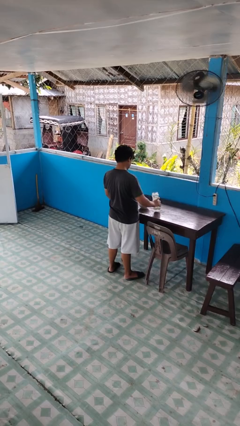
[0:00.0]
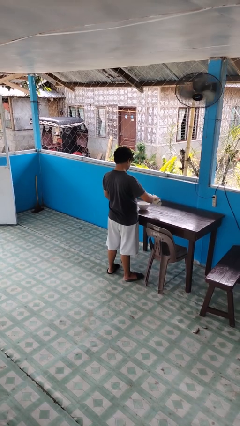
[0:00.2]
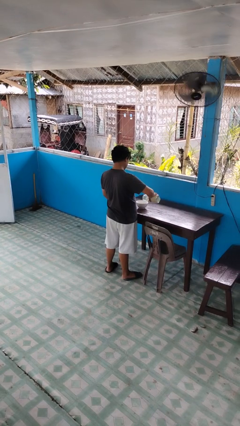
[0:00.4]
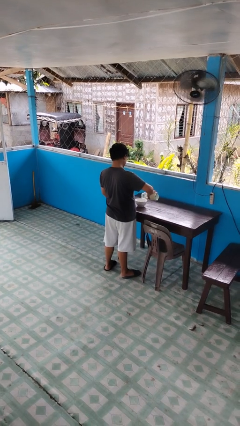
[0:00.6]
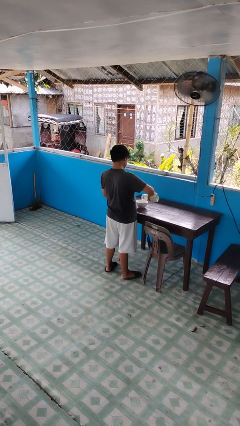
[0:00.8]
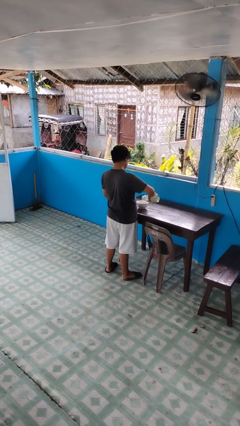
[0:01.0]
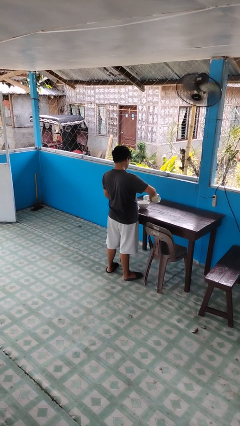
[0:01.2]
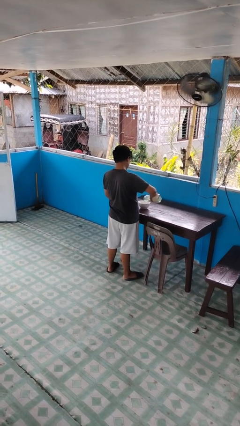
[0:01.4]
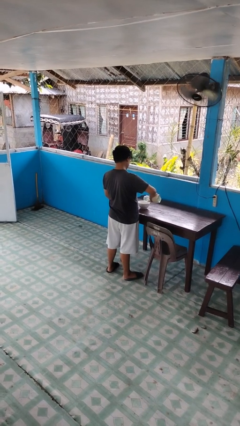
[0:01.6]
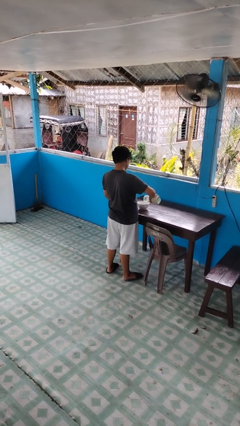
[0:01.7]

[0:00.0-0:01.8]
person pours into bowl

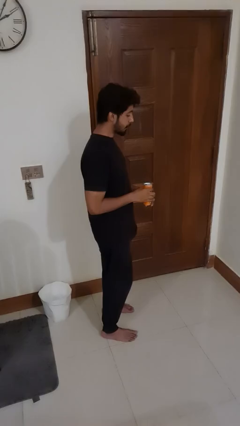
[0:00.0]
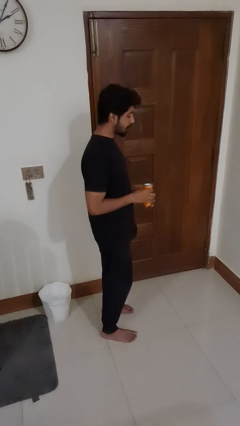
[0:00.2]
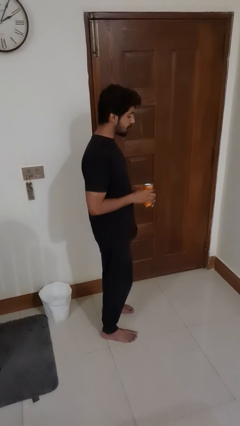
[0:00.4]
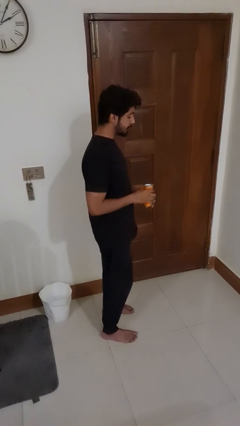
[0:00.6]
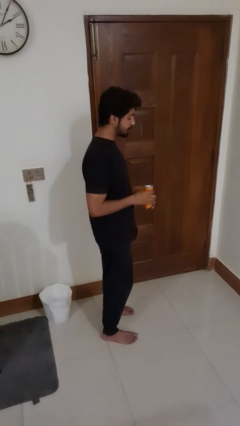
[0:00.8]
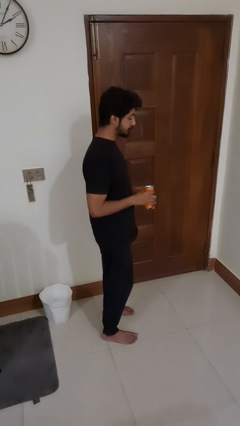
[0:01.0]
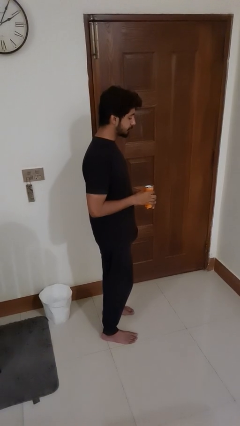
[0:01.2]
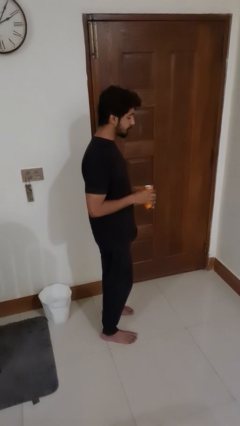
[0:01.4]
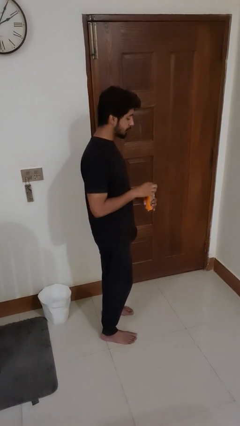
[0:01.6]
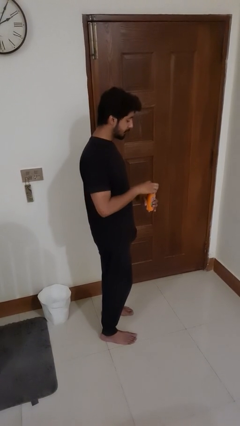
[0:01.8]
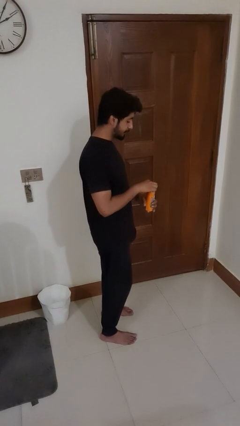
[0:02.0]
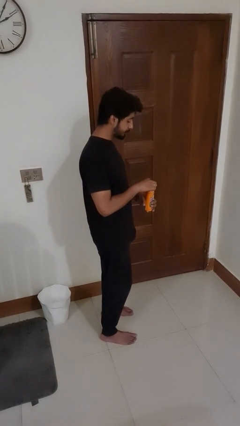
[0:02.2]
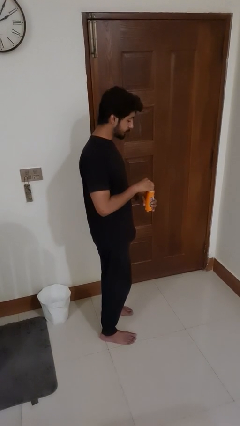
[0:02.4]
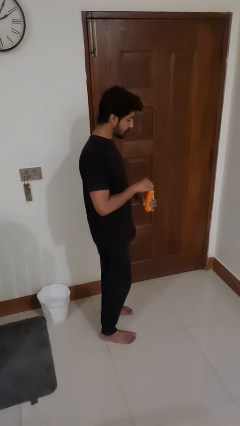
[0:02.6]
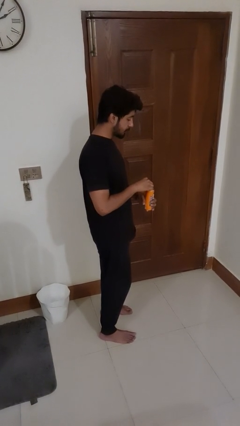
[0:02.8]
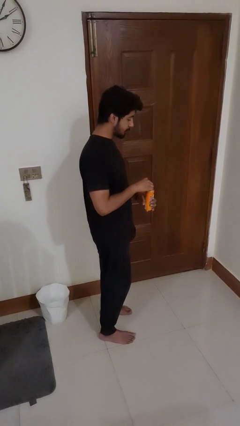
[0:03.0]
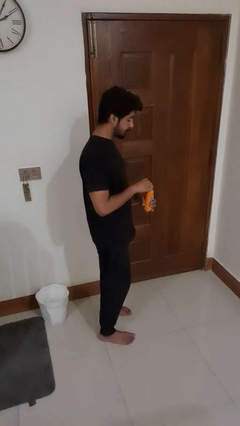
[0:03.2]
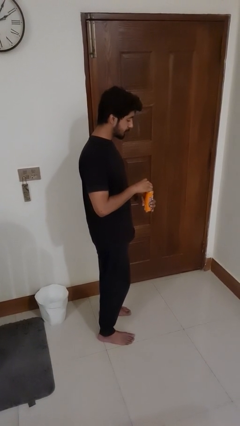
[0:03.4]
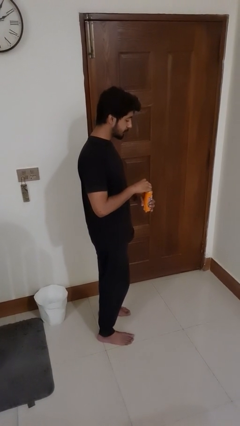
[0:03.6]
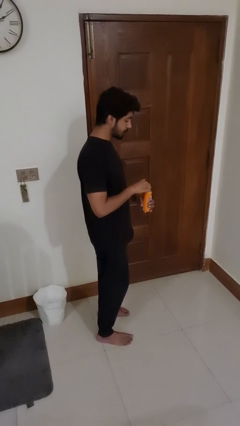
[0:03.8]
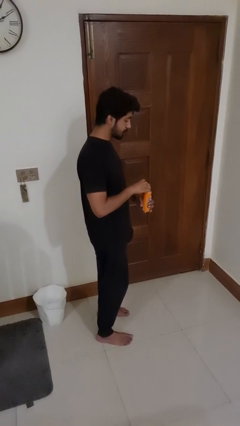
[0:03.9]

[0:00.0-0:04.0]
person opens beverage can

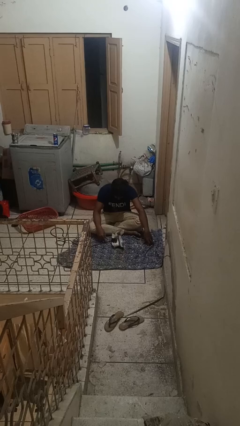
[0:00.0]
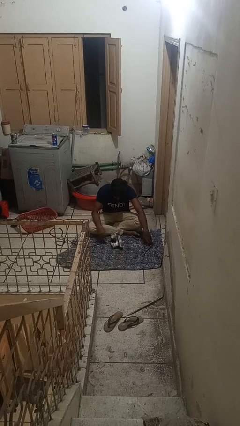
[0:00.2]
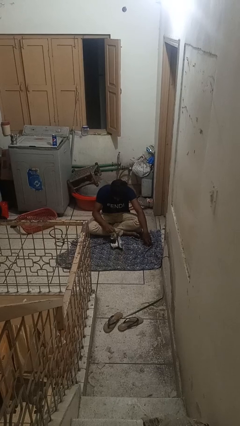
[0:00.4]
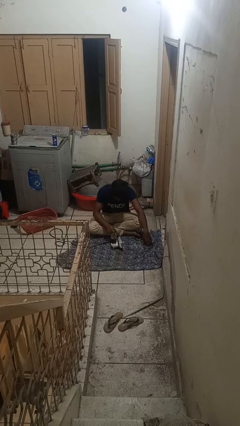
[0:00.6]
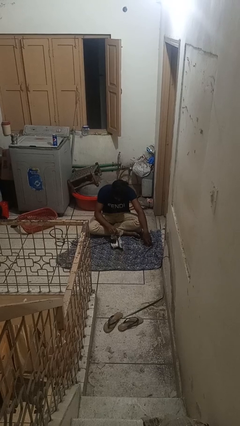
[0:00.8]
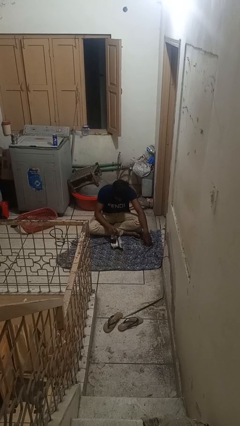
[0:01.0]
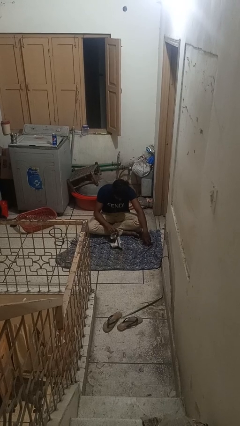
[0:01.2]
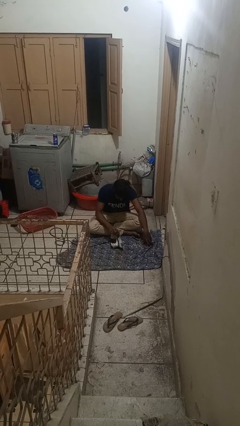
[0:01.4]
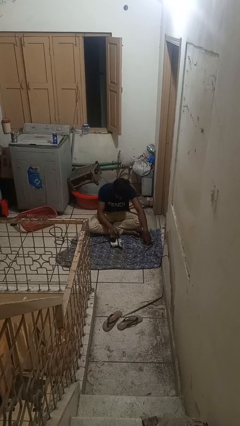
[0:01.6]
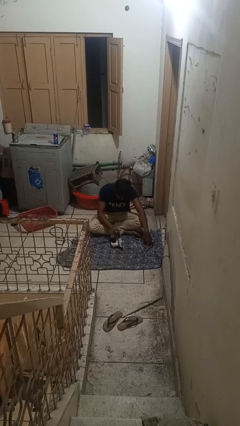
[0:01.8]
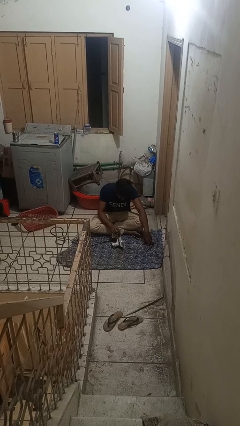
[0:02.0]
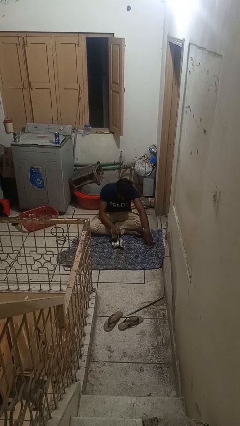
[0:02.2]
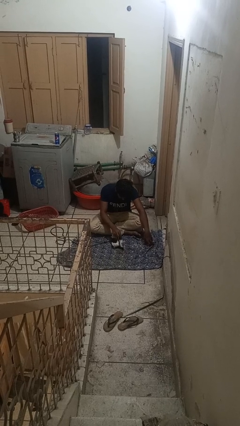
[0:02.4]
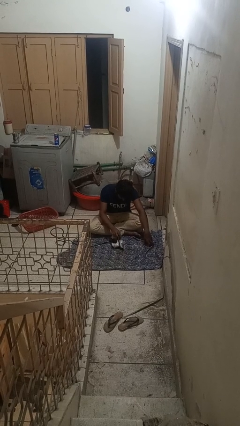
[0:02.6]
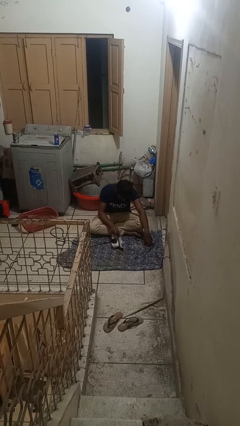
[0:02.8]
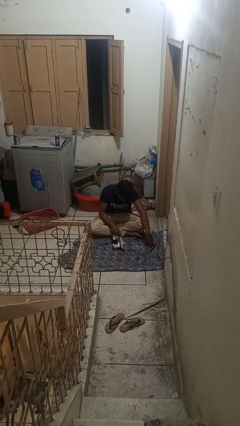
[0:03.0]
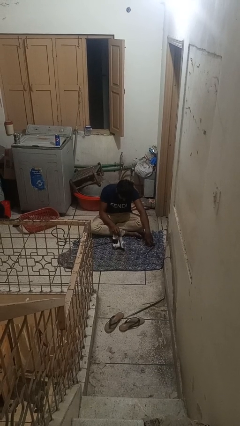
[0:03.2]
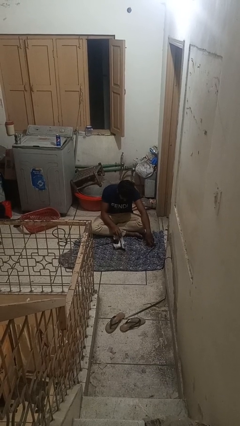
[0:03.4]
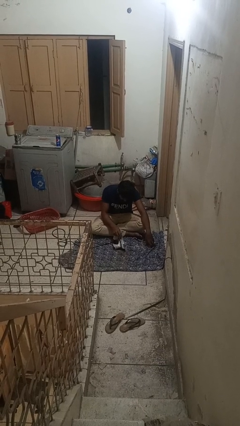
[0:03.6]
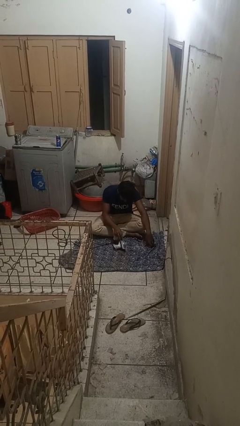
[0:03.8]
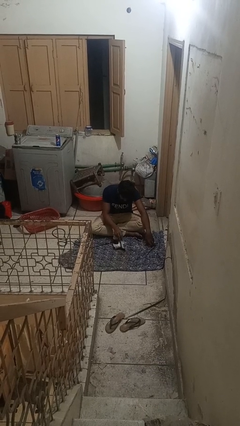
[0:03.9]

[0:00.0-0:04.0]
person taps object with finger

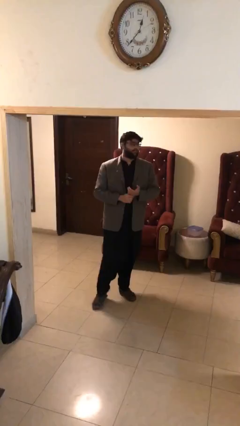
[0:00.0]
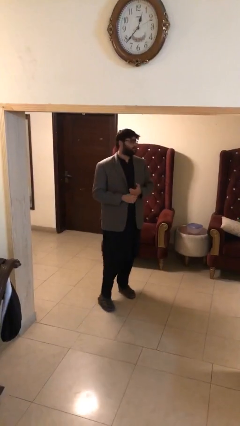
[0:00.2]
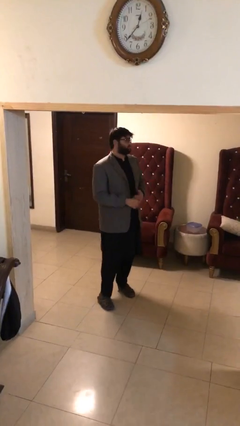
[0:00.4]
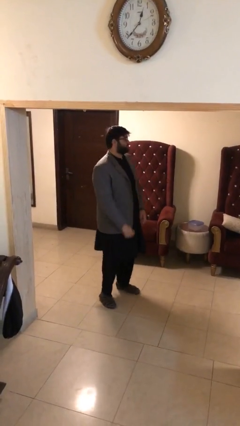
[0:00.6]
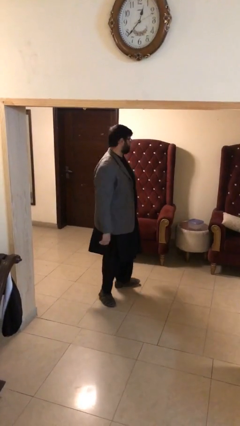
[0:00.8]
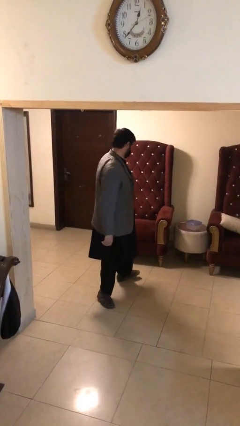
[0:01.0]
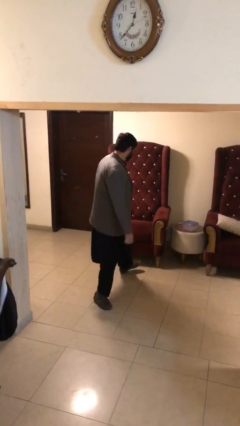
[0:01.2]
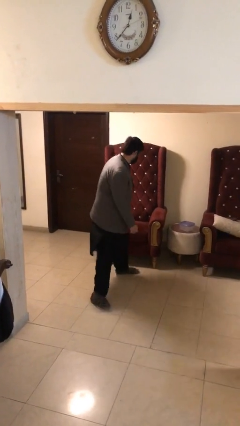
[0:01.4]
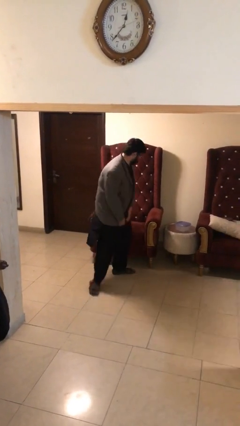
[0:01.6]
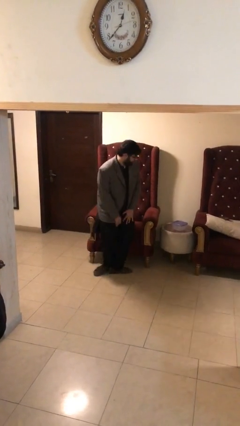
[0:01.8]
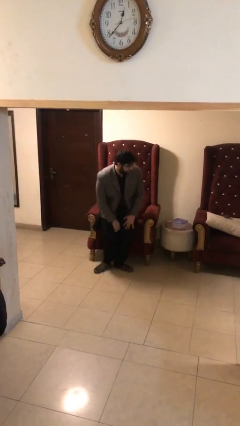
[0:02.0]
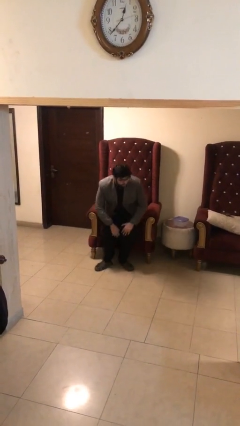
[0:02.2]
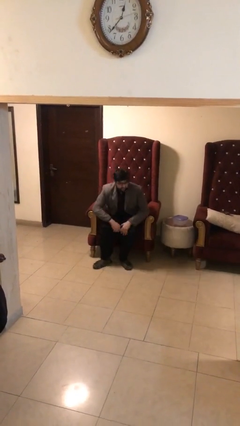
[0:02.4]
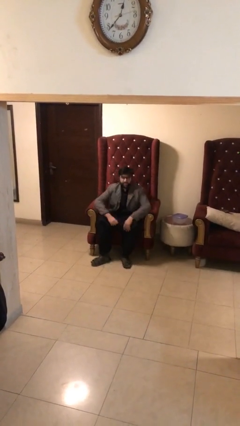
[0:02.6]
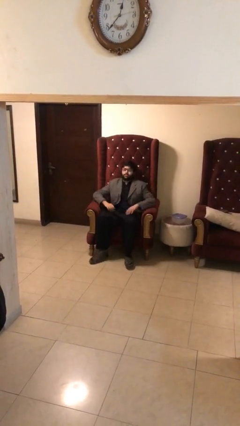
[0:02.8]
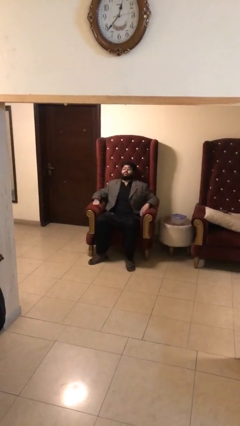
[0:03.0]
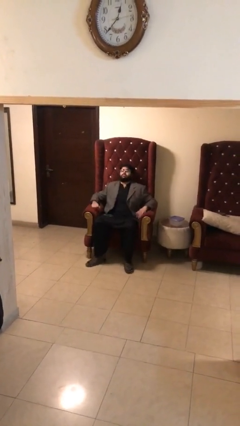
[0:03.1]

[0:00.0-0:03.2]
person sits down

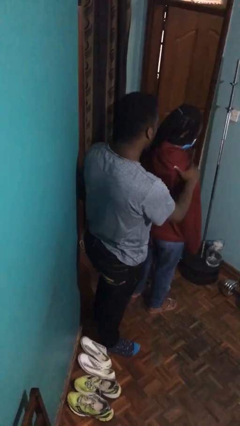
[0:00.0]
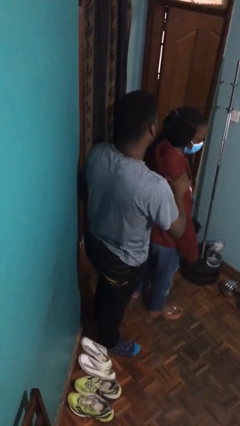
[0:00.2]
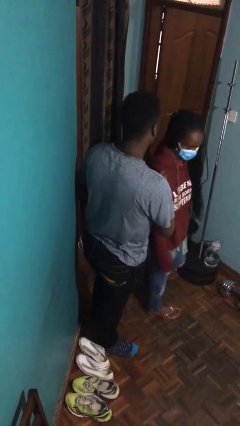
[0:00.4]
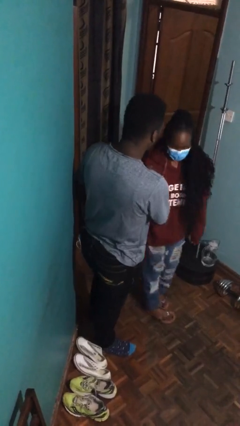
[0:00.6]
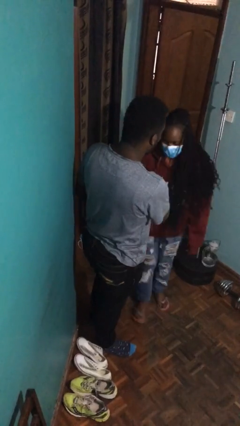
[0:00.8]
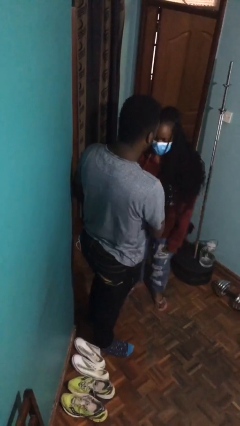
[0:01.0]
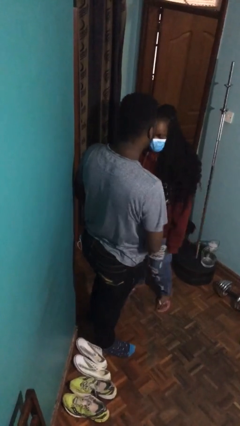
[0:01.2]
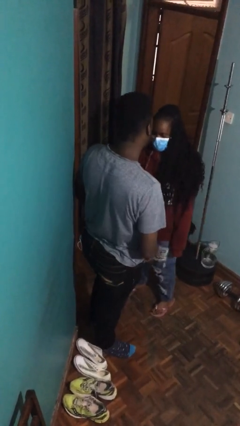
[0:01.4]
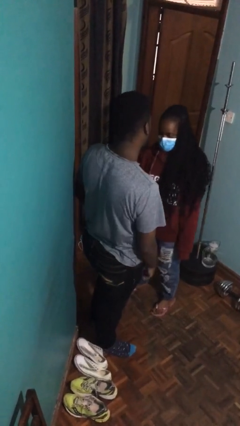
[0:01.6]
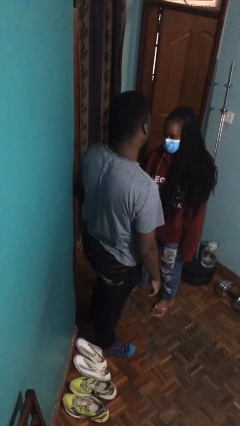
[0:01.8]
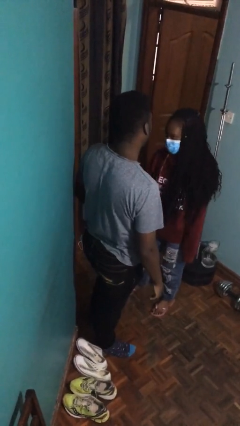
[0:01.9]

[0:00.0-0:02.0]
person spins person around

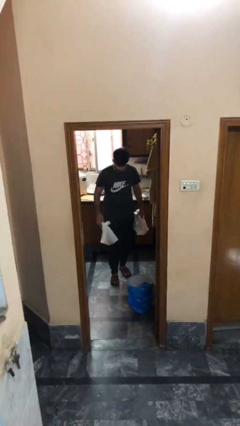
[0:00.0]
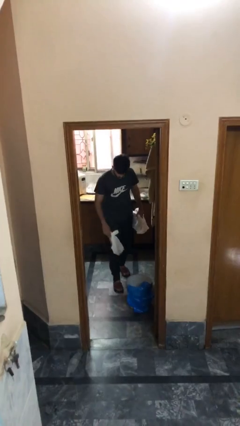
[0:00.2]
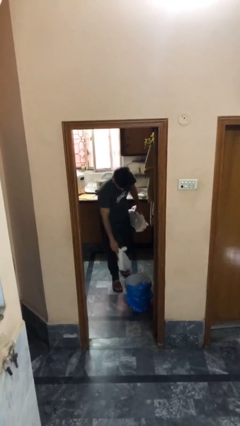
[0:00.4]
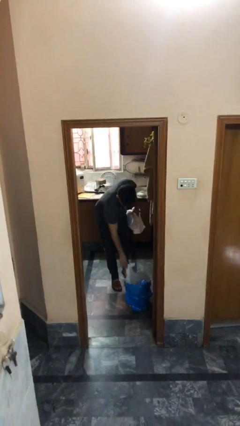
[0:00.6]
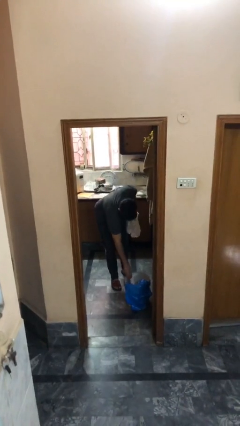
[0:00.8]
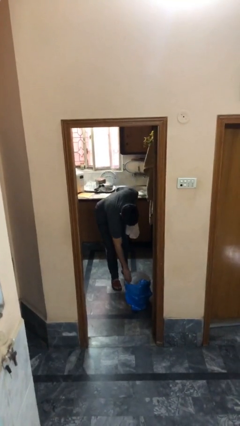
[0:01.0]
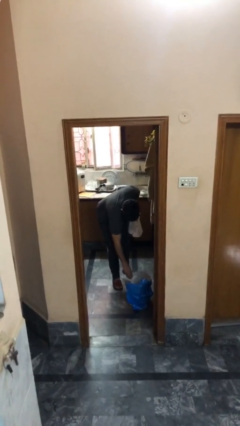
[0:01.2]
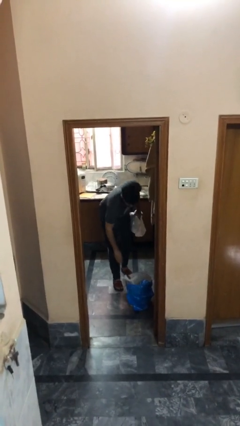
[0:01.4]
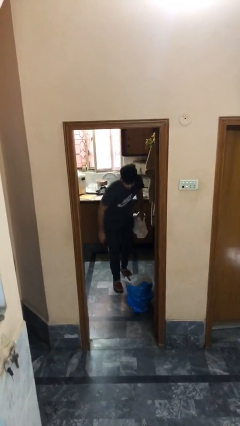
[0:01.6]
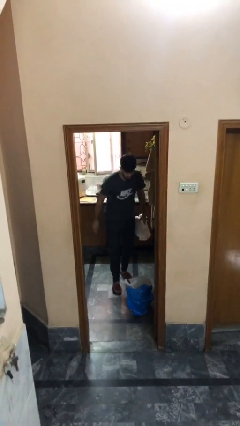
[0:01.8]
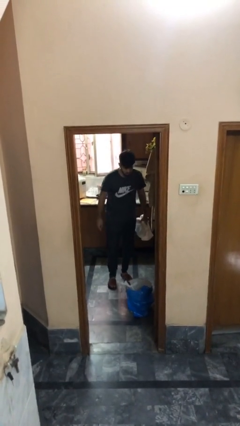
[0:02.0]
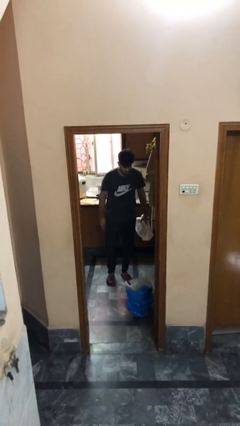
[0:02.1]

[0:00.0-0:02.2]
person discards trash

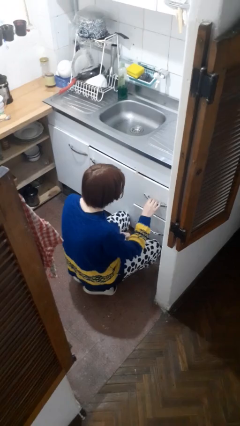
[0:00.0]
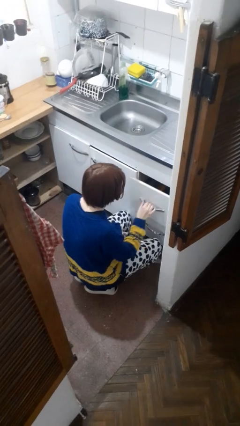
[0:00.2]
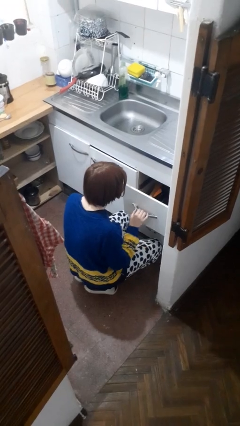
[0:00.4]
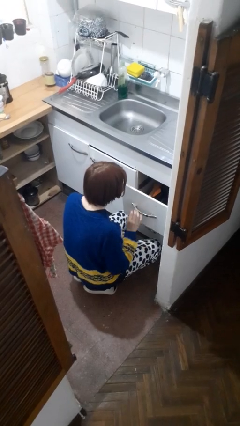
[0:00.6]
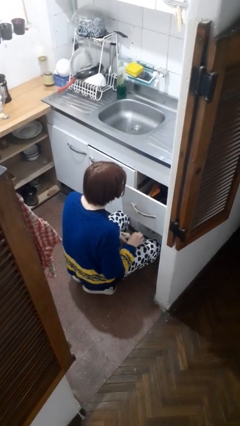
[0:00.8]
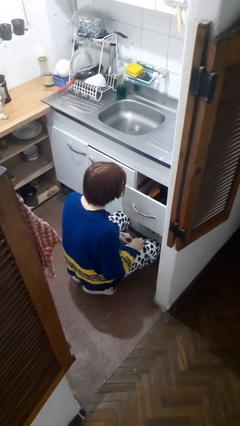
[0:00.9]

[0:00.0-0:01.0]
person opens kitchen drawer
